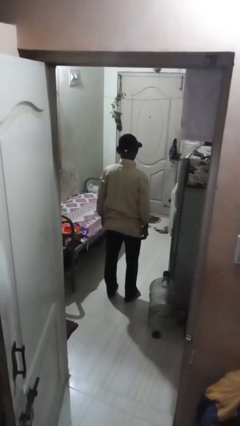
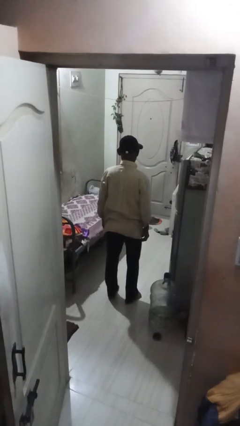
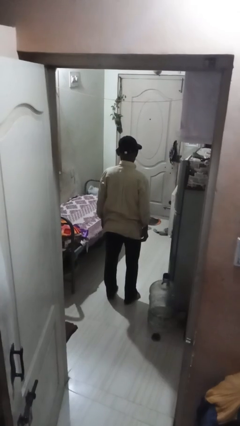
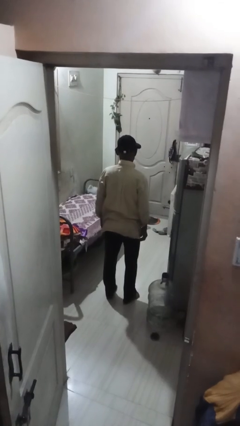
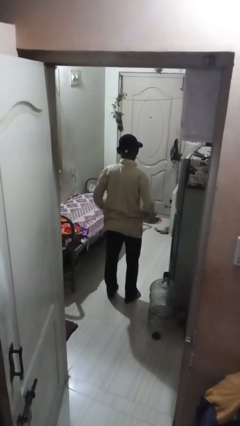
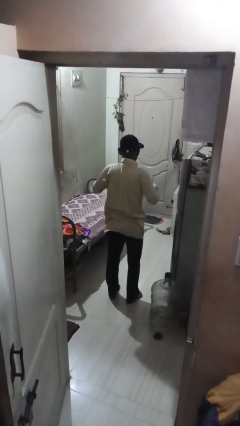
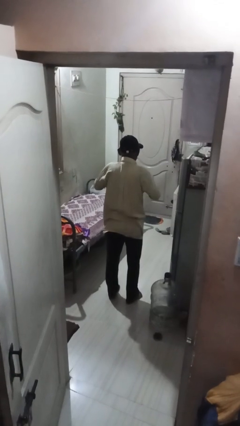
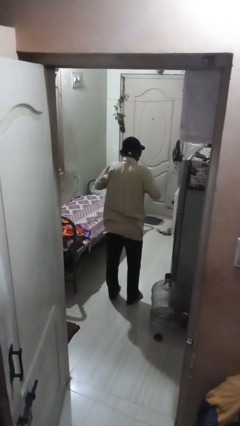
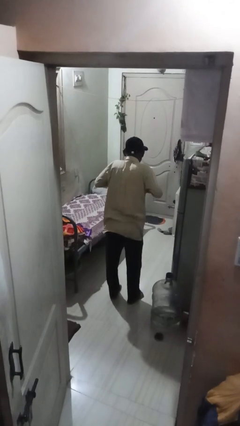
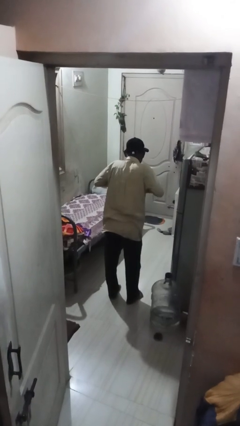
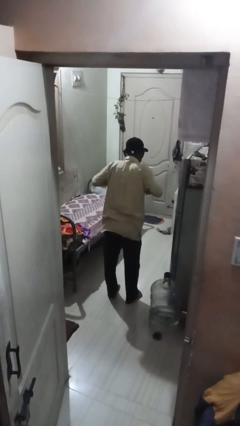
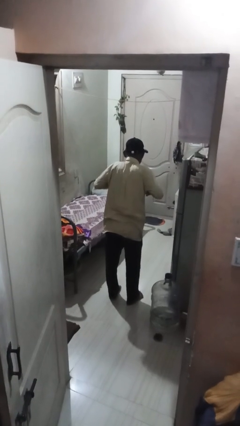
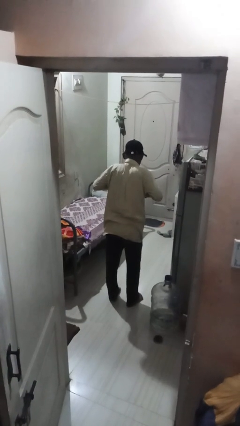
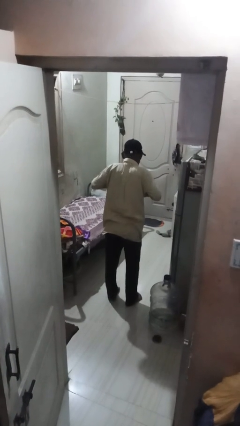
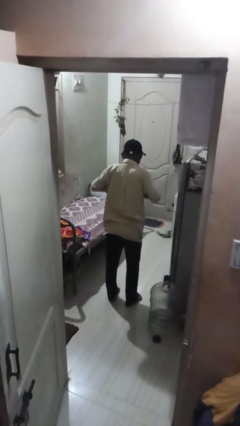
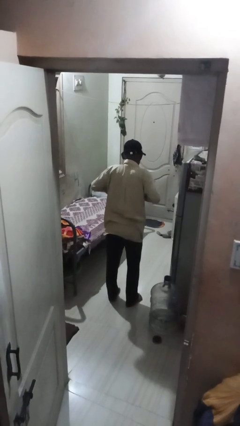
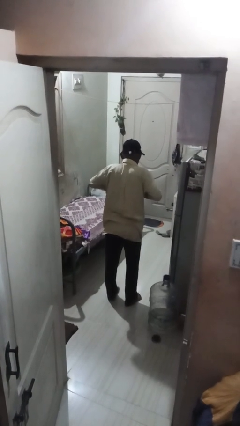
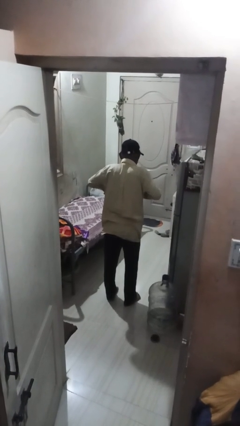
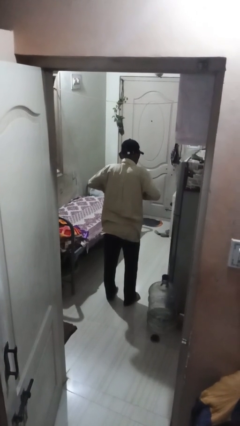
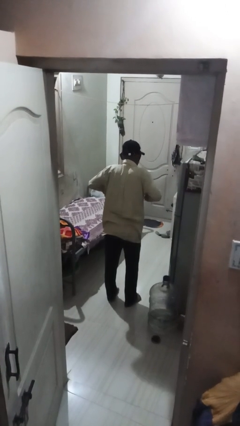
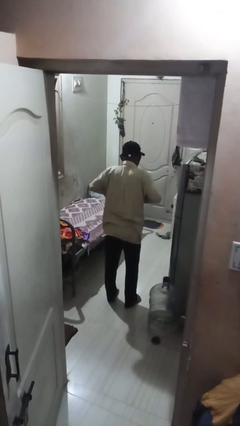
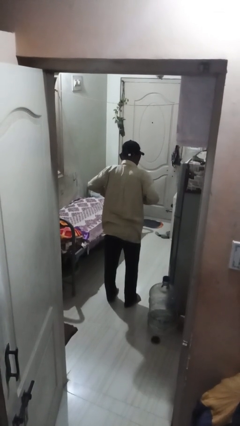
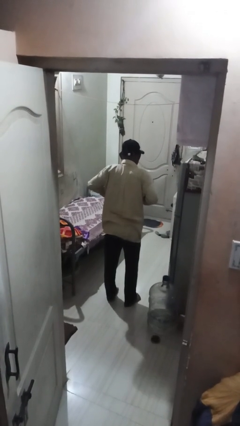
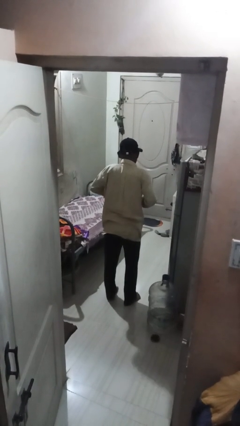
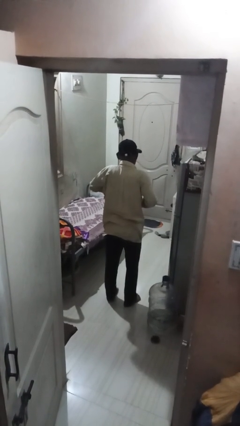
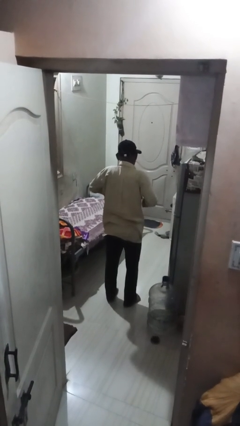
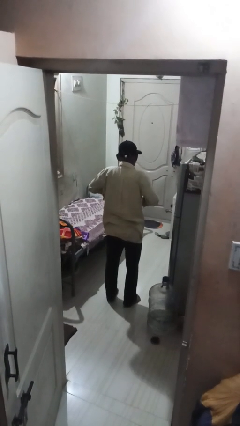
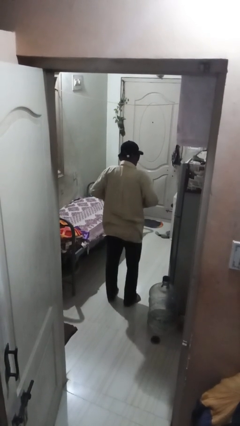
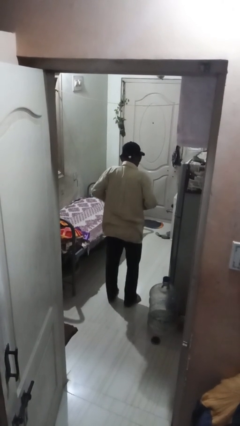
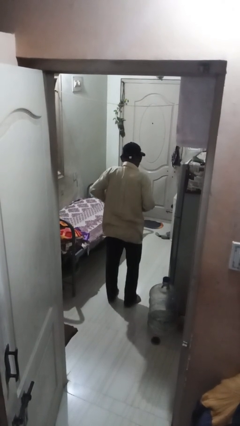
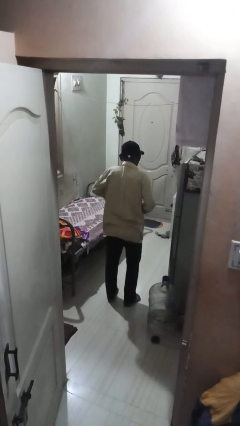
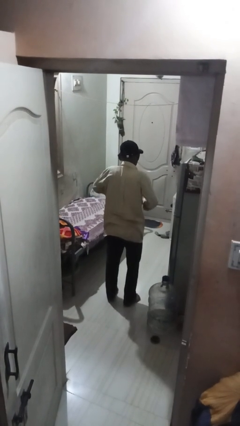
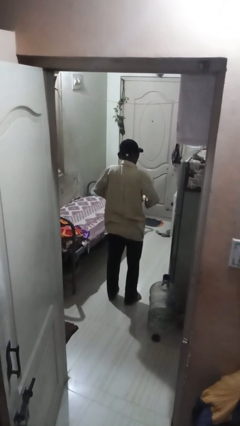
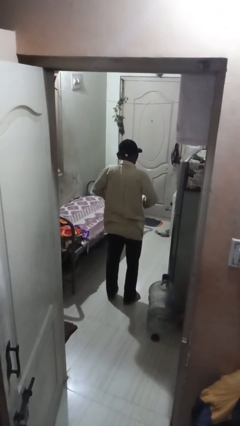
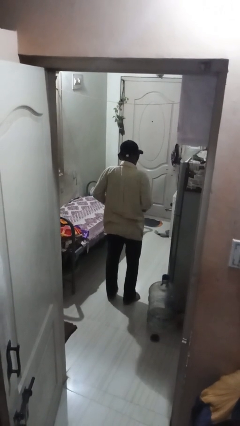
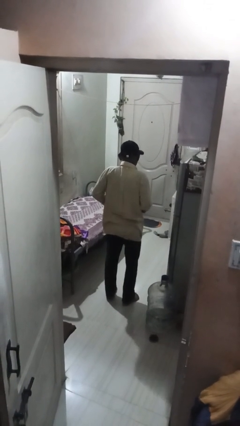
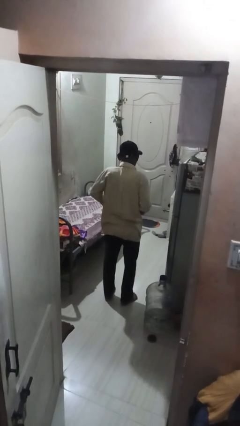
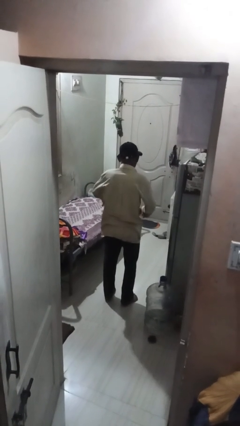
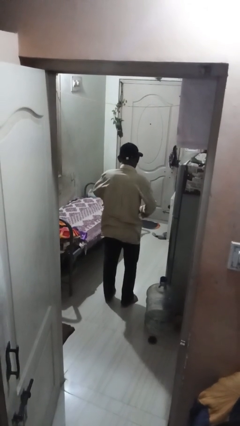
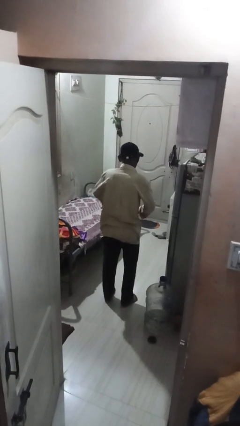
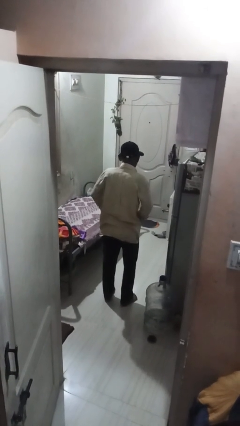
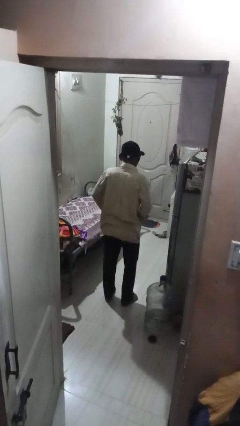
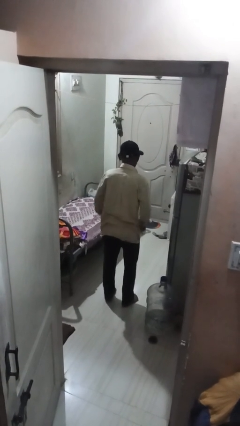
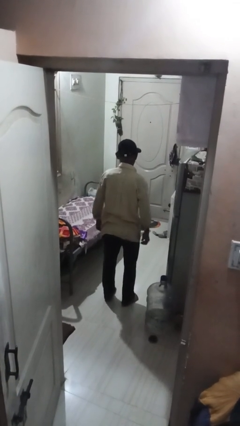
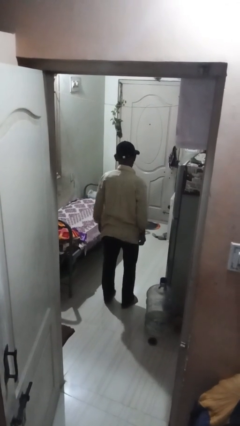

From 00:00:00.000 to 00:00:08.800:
person buttons shirt

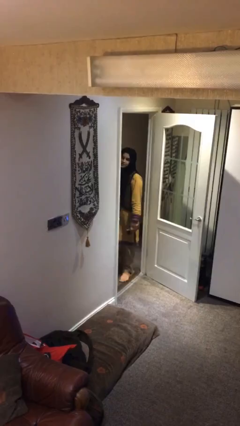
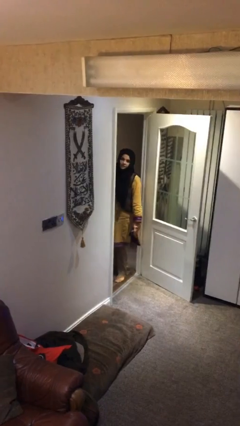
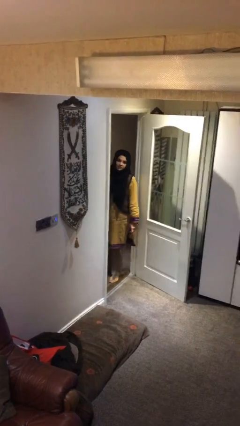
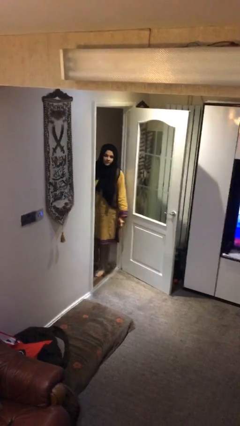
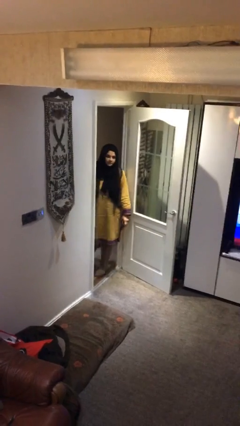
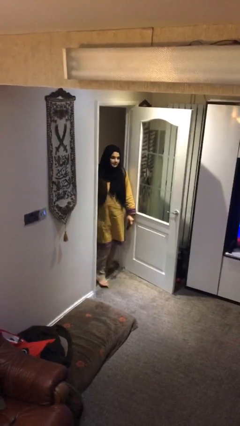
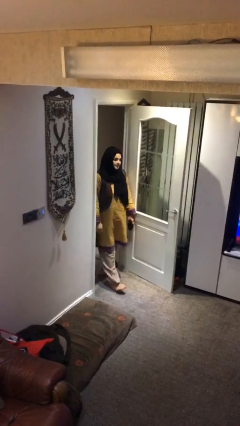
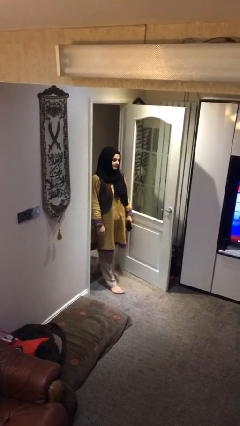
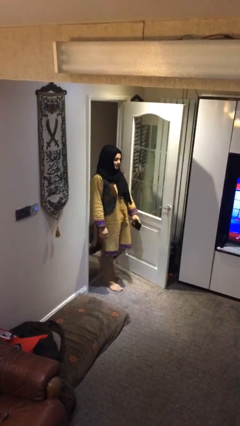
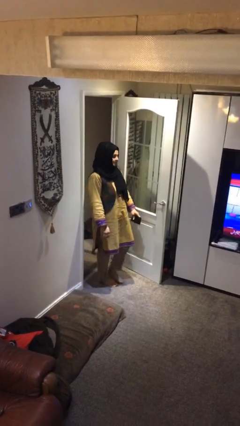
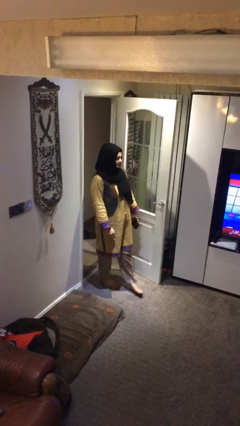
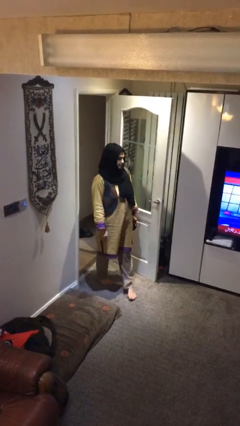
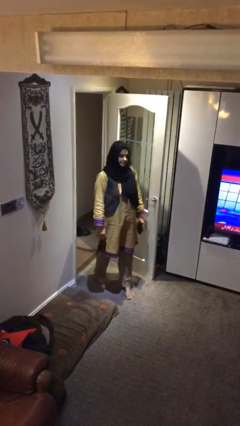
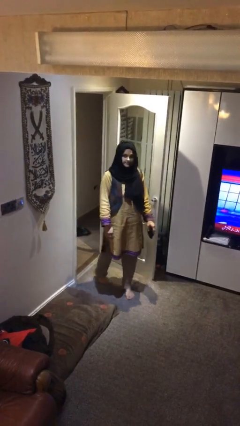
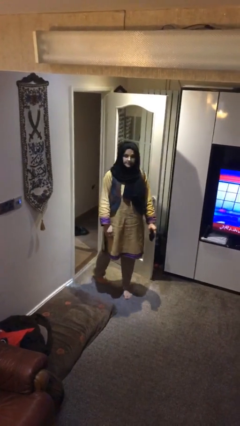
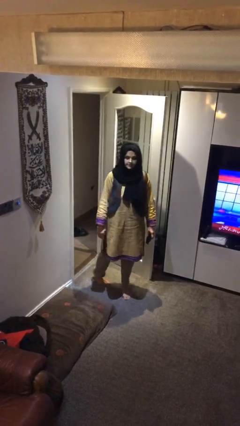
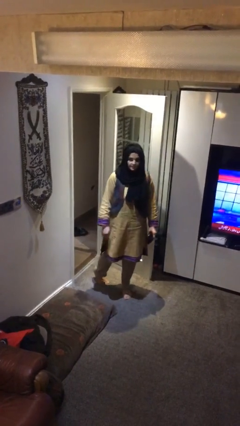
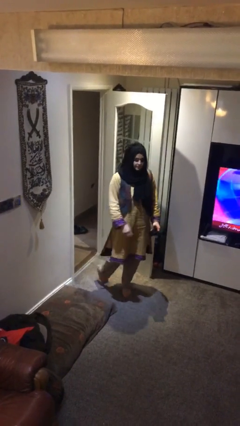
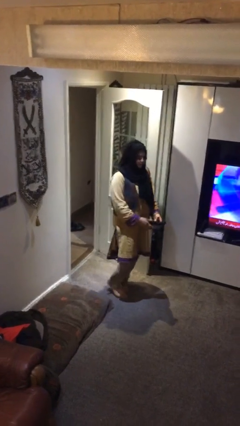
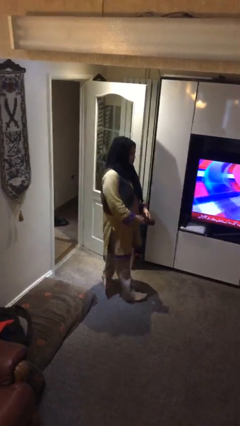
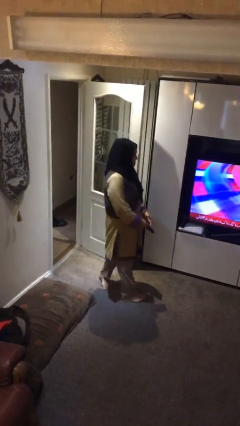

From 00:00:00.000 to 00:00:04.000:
person enters scene through structure

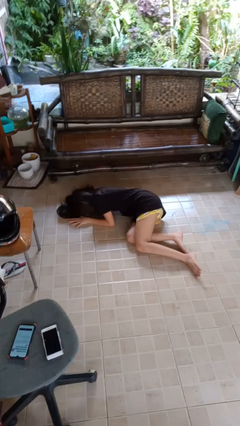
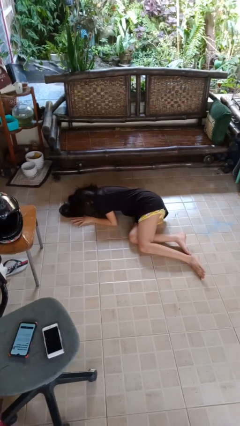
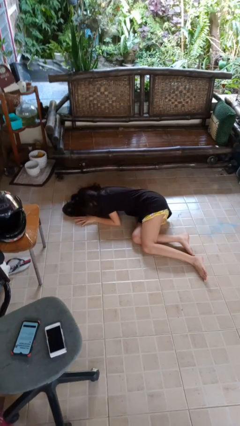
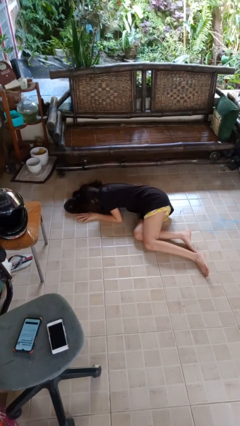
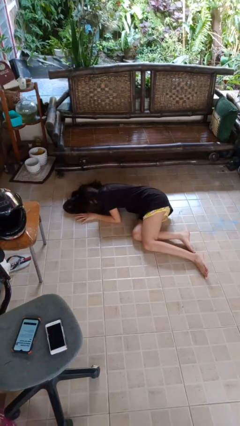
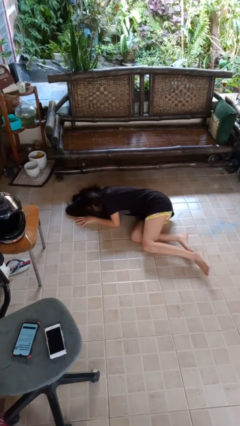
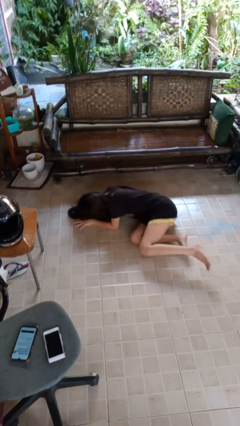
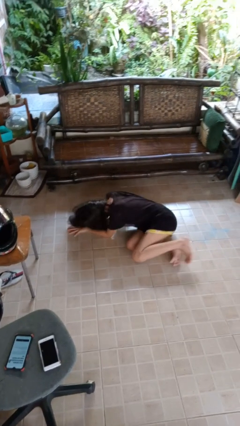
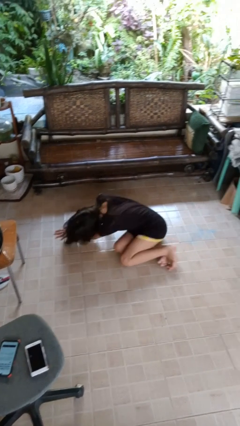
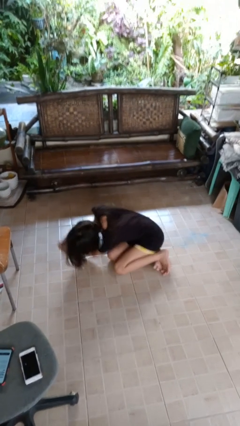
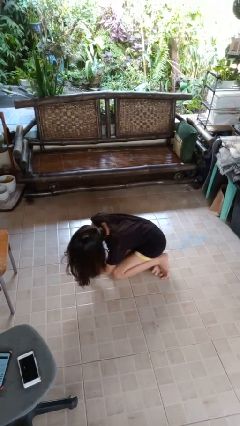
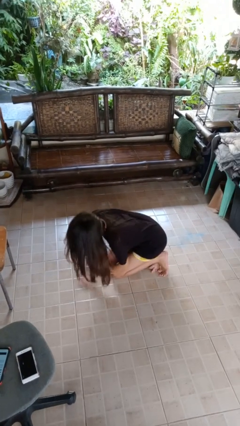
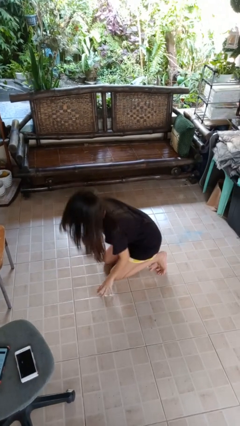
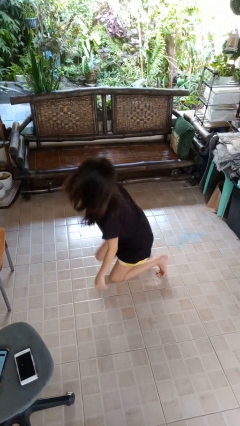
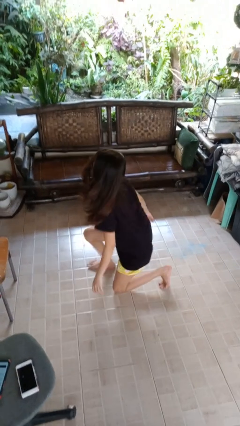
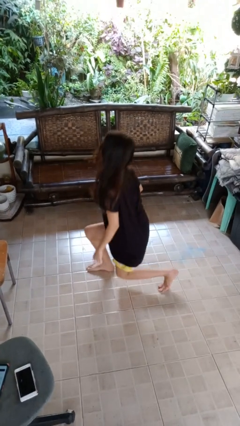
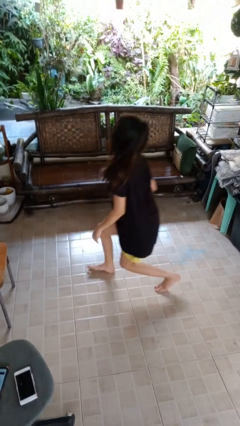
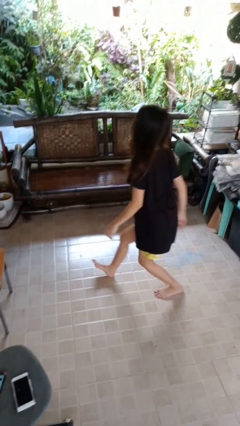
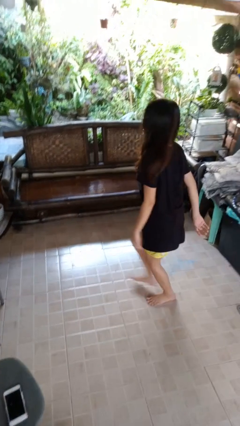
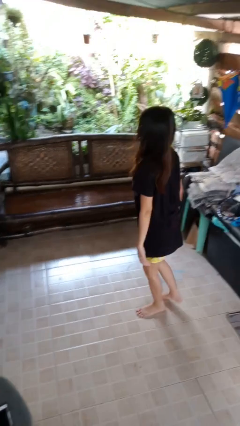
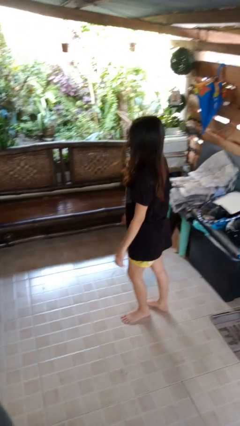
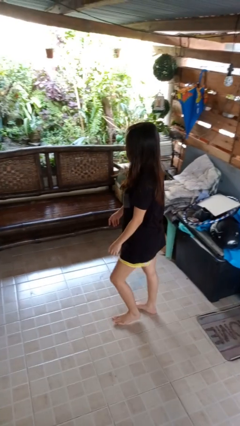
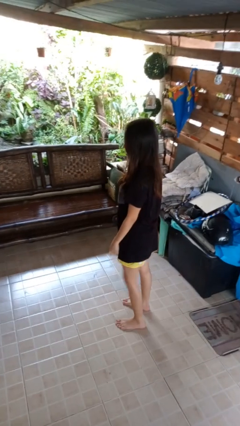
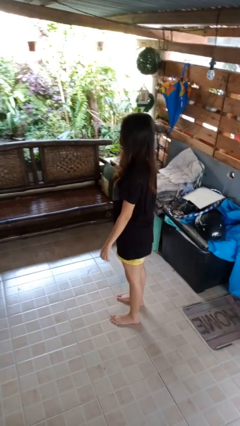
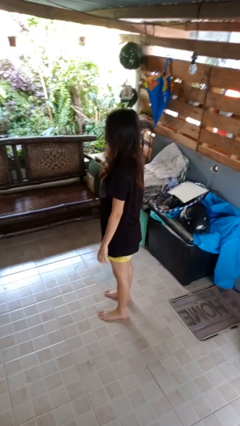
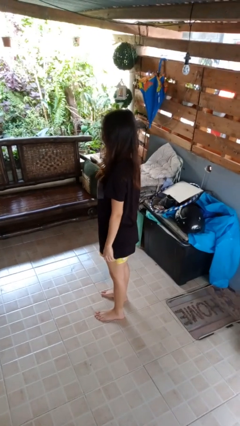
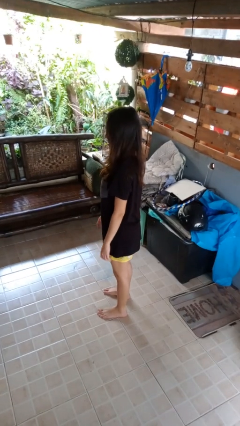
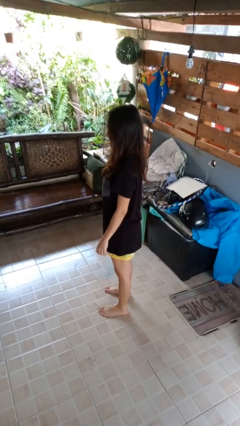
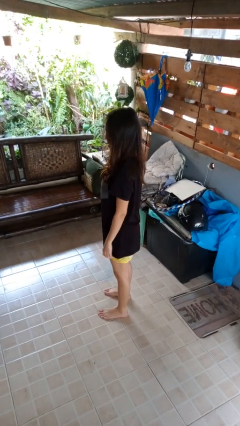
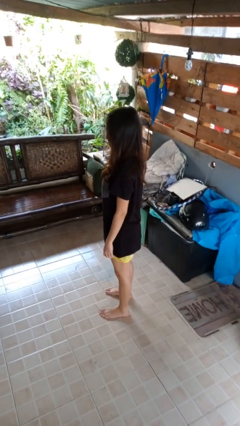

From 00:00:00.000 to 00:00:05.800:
person stands up from floor
